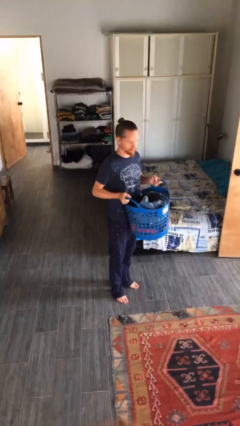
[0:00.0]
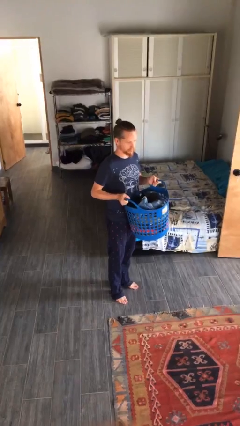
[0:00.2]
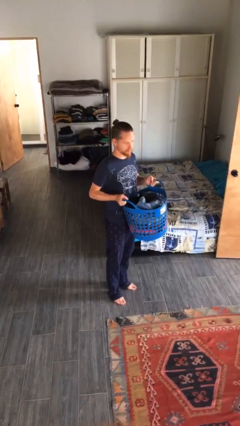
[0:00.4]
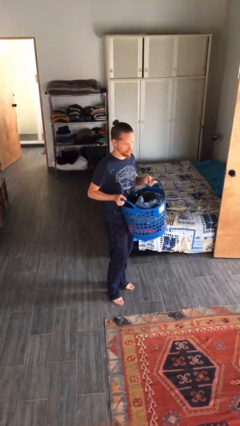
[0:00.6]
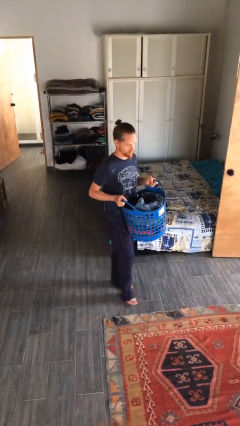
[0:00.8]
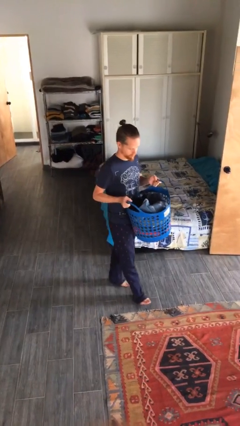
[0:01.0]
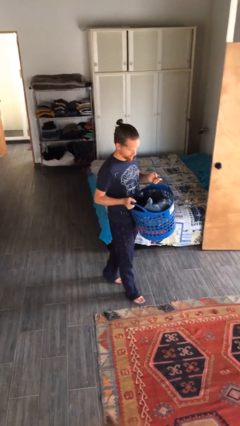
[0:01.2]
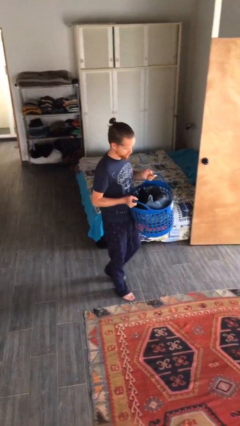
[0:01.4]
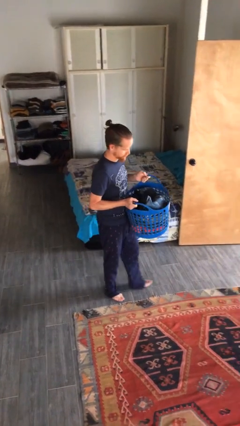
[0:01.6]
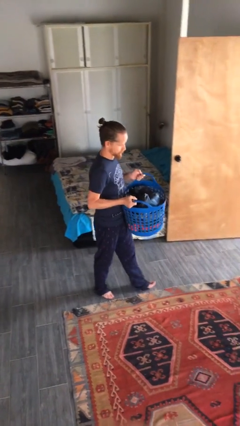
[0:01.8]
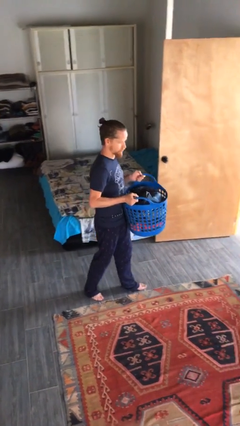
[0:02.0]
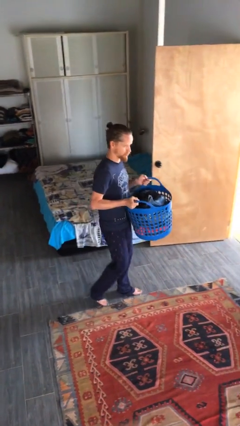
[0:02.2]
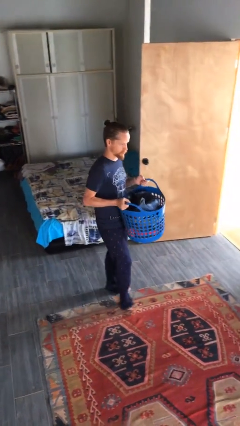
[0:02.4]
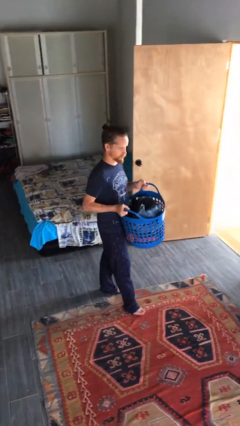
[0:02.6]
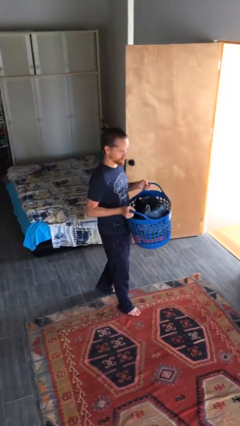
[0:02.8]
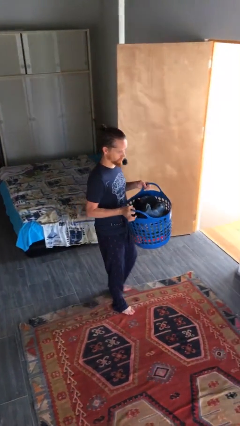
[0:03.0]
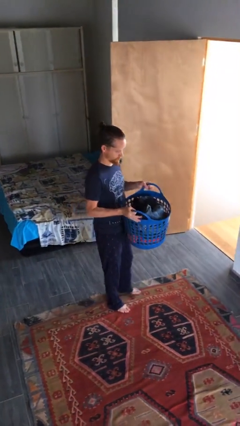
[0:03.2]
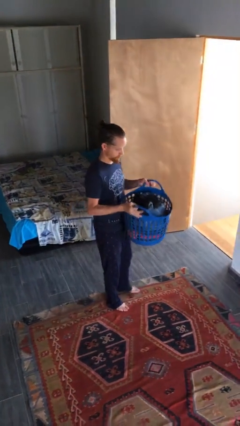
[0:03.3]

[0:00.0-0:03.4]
person carries laundry basket

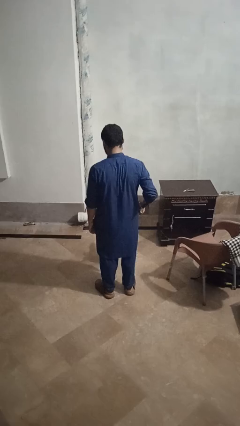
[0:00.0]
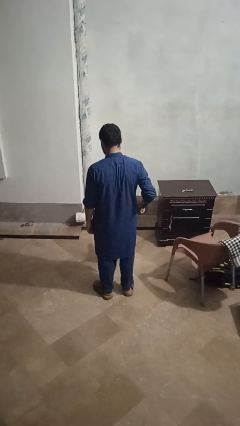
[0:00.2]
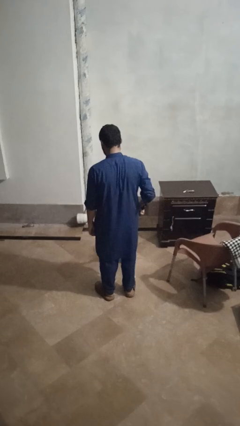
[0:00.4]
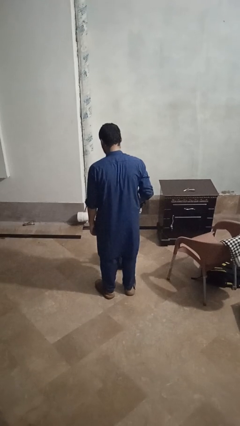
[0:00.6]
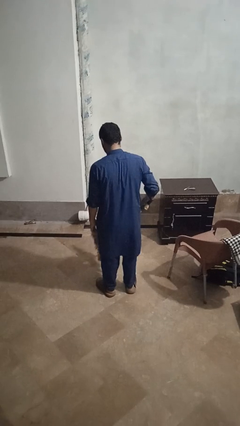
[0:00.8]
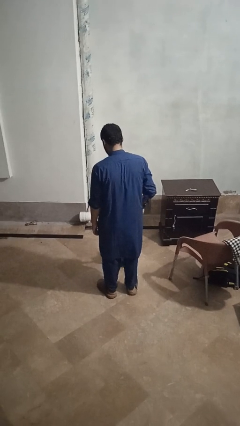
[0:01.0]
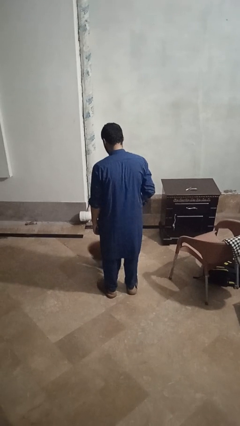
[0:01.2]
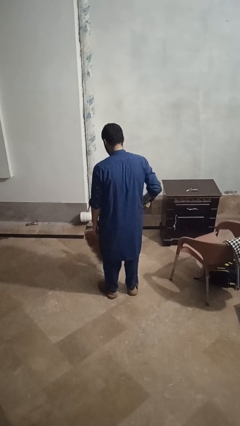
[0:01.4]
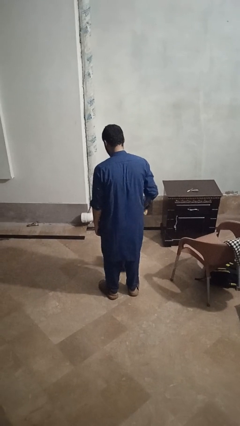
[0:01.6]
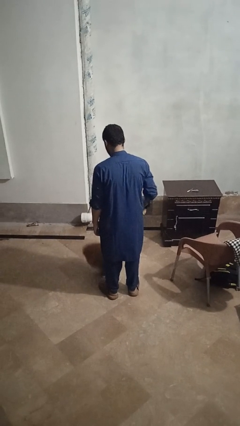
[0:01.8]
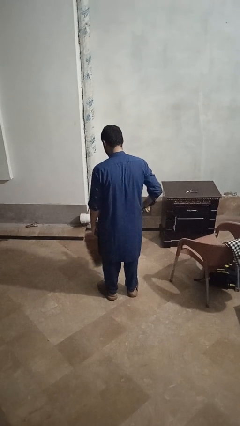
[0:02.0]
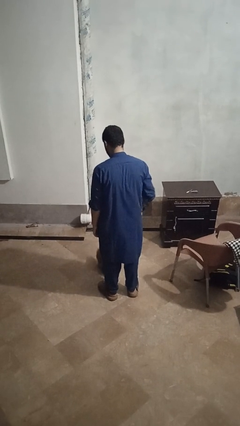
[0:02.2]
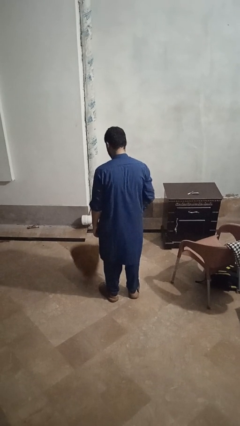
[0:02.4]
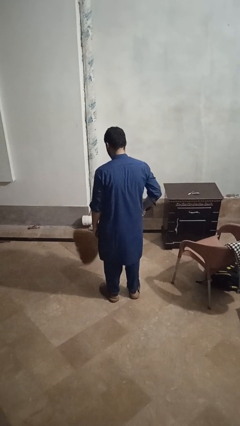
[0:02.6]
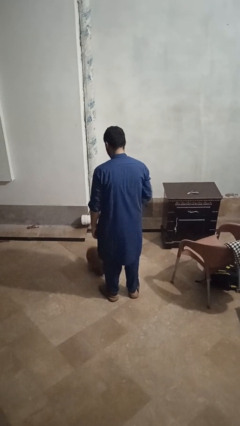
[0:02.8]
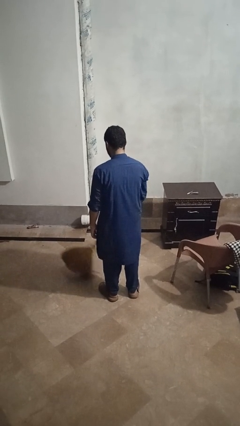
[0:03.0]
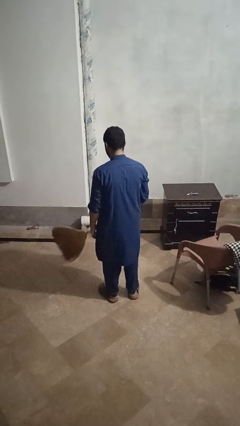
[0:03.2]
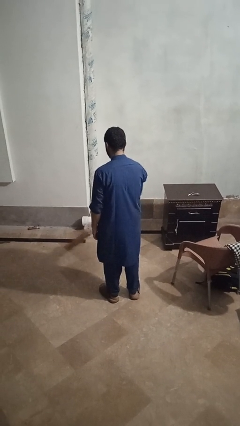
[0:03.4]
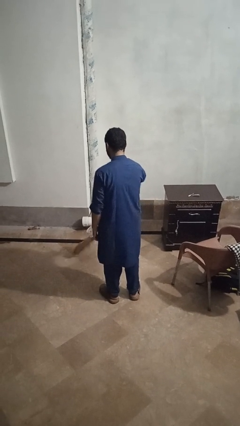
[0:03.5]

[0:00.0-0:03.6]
person mops

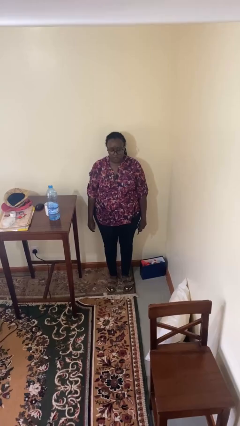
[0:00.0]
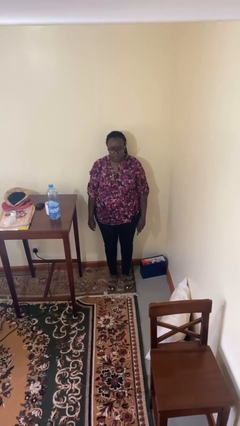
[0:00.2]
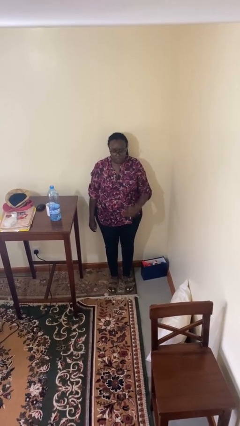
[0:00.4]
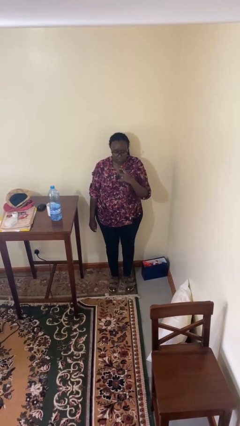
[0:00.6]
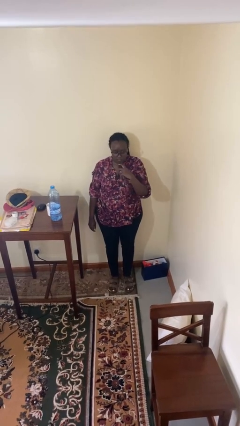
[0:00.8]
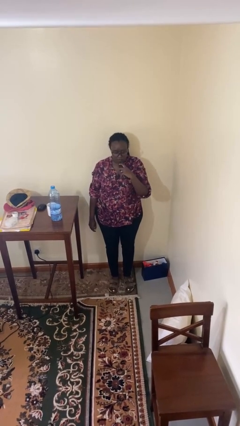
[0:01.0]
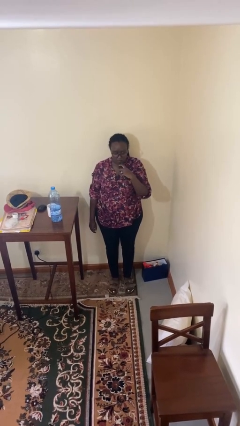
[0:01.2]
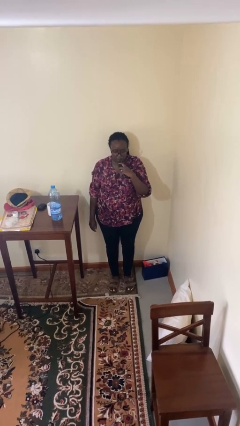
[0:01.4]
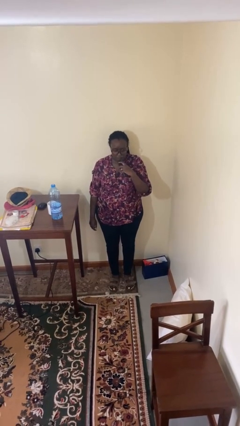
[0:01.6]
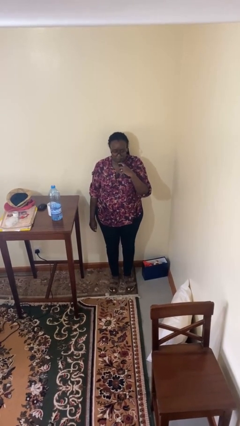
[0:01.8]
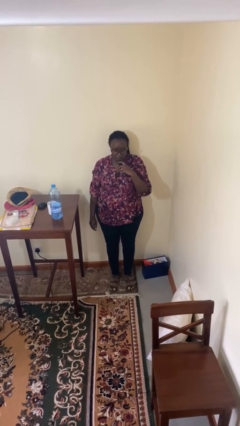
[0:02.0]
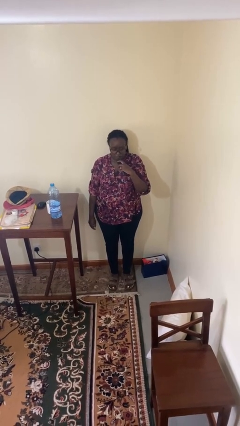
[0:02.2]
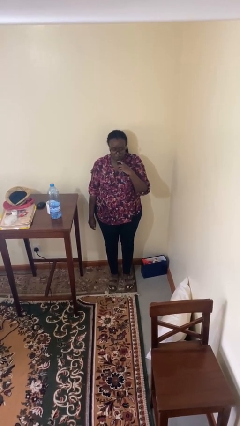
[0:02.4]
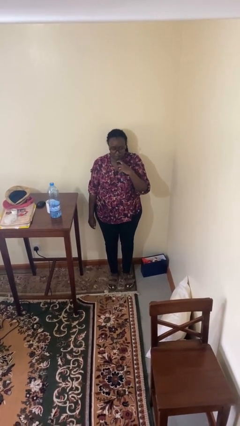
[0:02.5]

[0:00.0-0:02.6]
person vapes

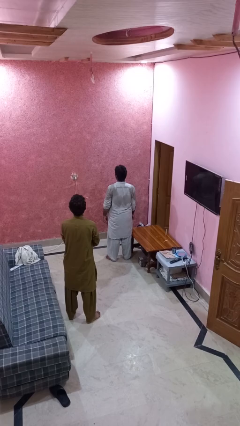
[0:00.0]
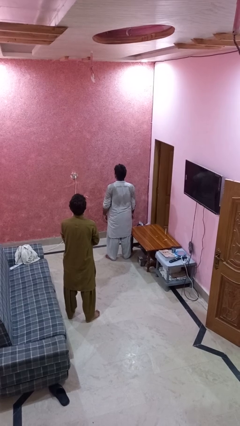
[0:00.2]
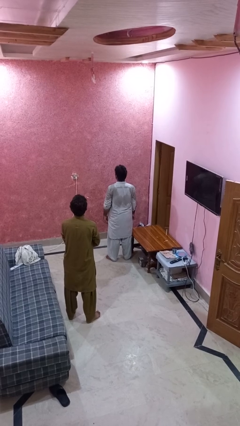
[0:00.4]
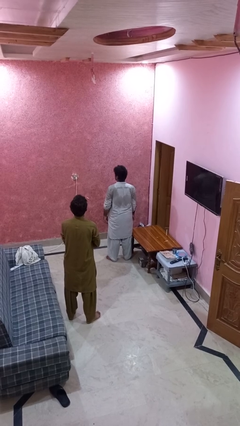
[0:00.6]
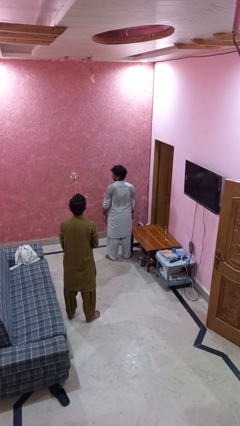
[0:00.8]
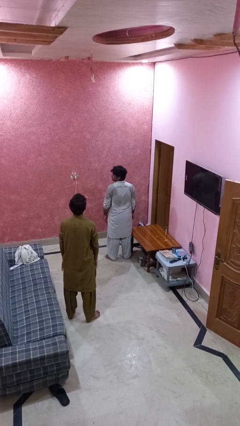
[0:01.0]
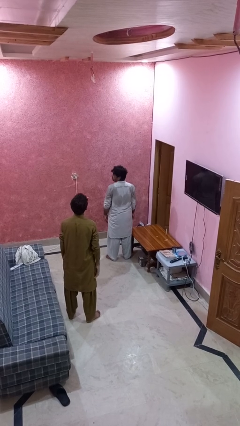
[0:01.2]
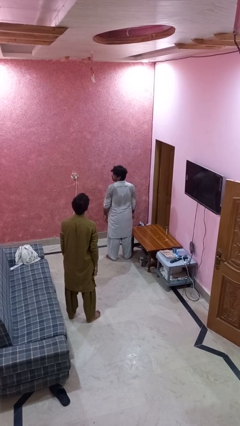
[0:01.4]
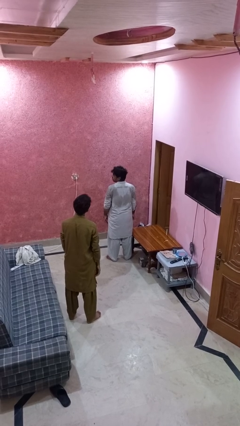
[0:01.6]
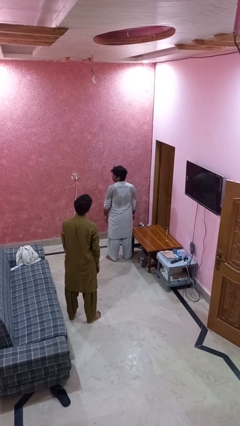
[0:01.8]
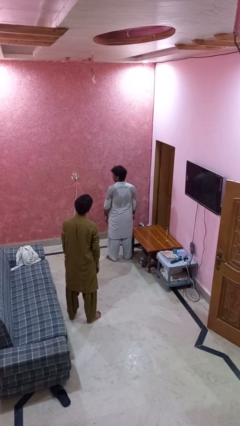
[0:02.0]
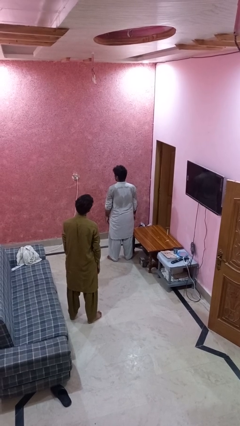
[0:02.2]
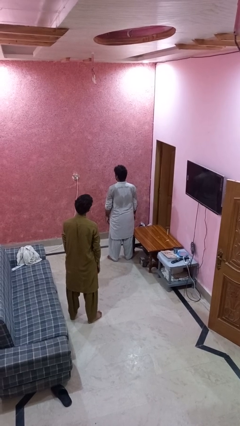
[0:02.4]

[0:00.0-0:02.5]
person looks over shoulder

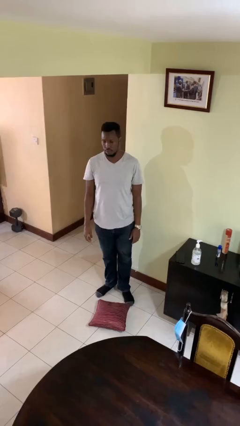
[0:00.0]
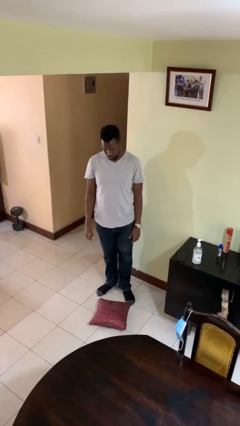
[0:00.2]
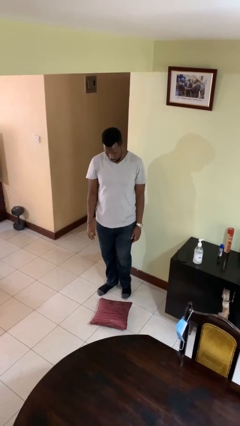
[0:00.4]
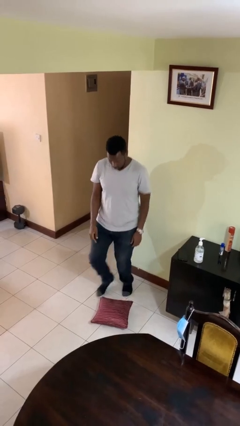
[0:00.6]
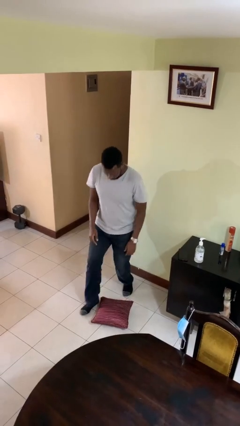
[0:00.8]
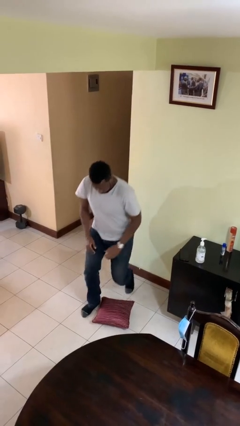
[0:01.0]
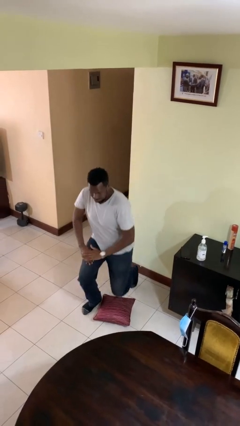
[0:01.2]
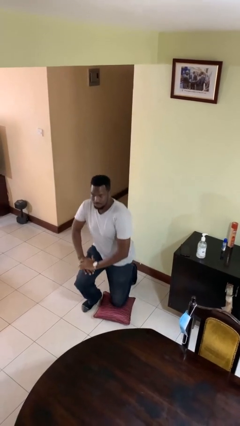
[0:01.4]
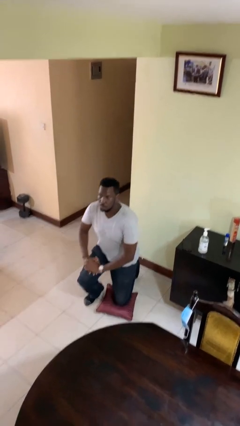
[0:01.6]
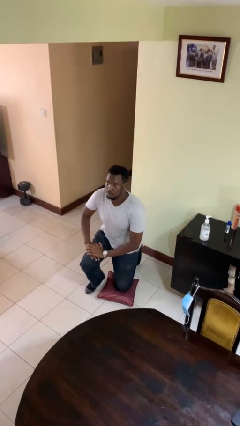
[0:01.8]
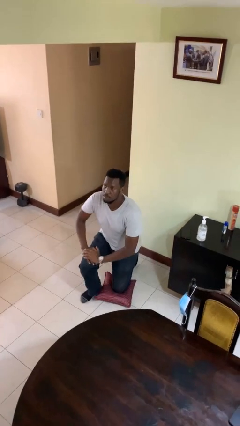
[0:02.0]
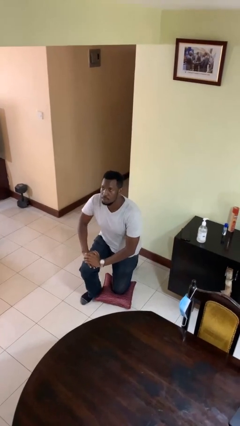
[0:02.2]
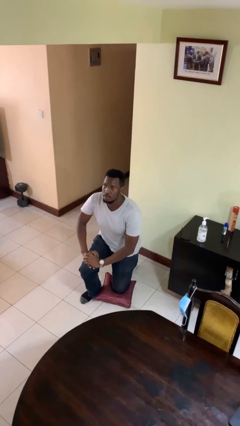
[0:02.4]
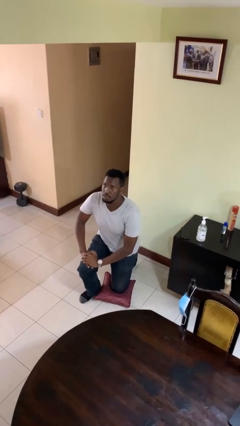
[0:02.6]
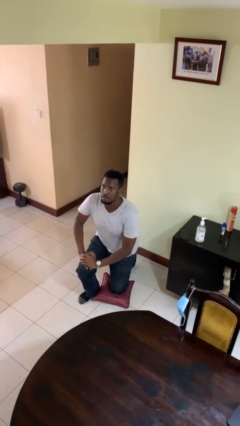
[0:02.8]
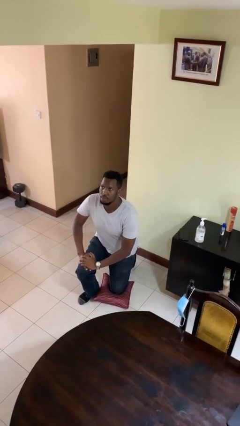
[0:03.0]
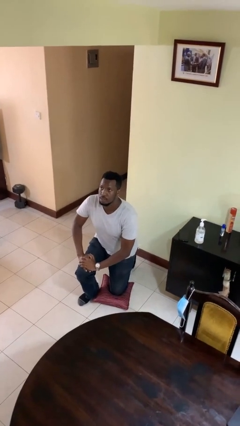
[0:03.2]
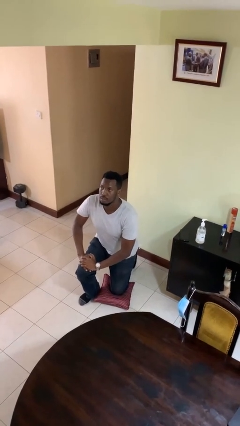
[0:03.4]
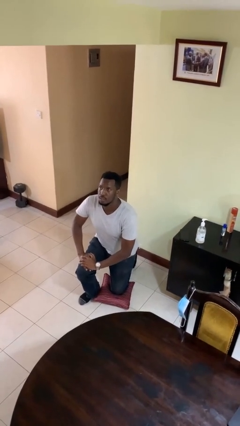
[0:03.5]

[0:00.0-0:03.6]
person kneels

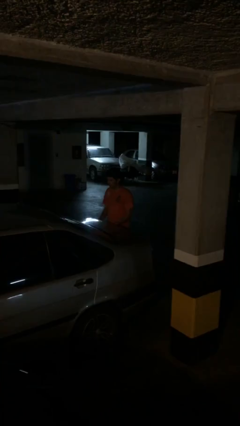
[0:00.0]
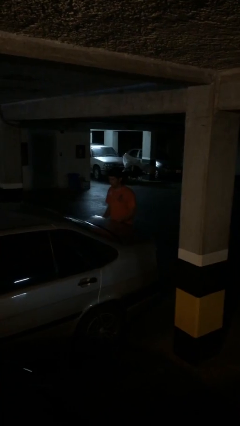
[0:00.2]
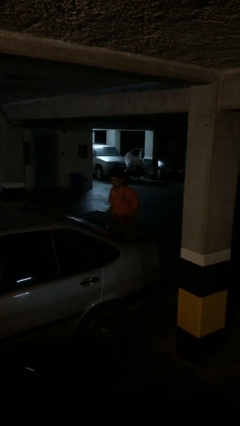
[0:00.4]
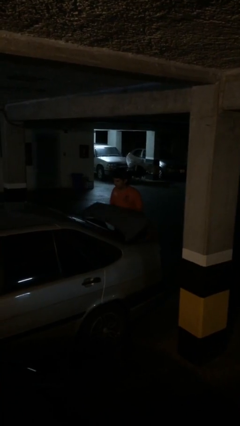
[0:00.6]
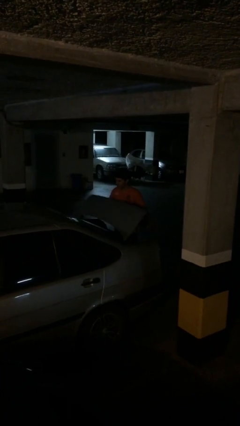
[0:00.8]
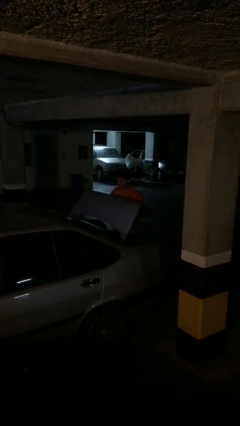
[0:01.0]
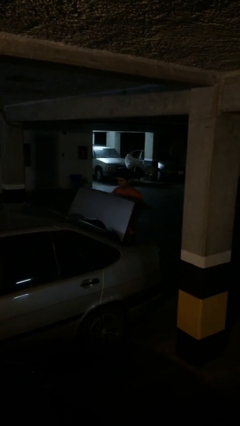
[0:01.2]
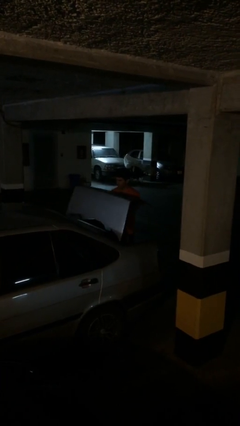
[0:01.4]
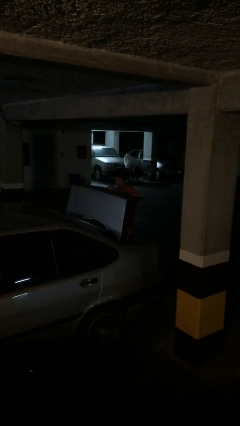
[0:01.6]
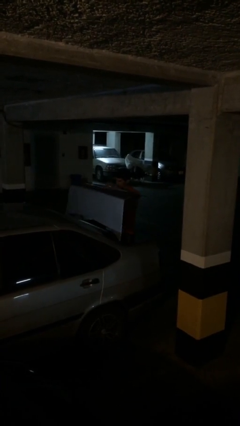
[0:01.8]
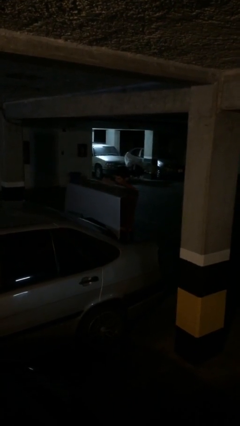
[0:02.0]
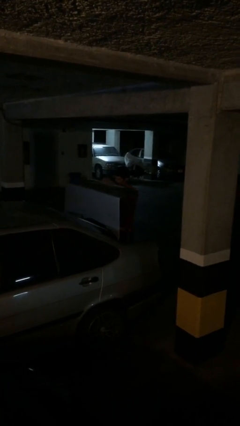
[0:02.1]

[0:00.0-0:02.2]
person opens car trunk
